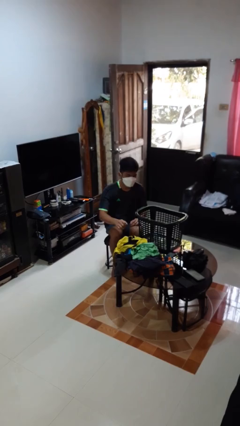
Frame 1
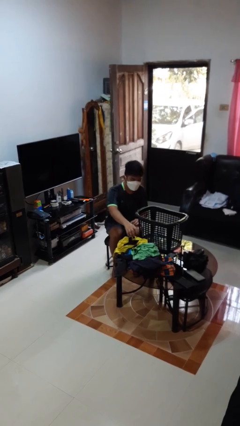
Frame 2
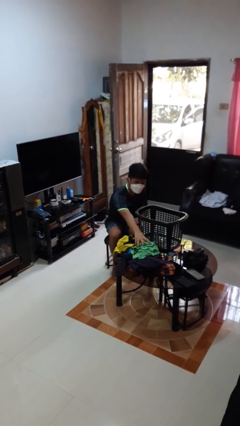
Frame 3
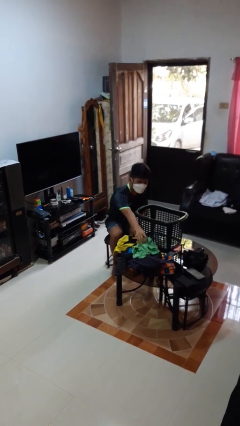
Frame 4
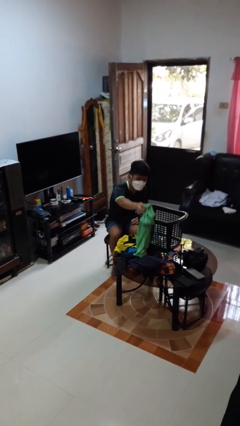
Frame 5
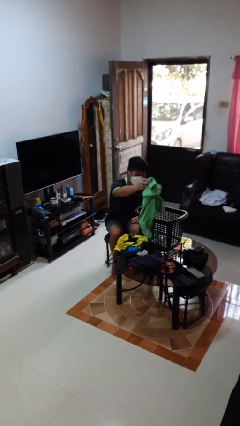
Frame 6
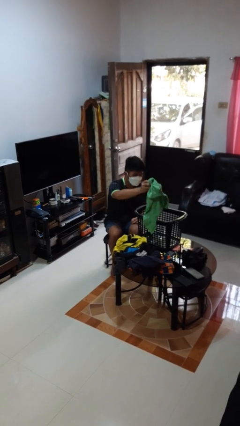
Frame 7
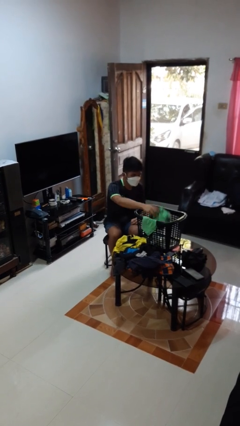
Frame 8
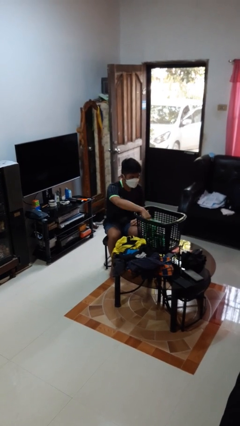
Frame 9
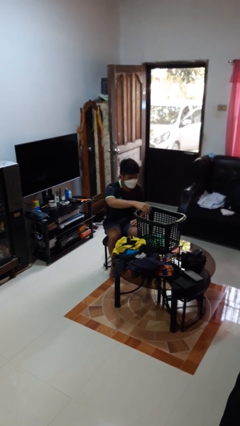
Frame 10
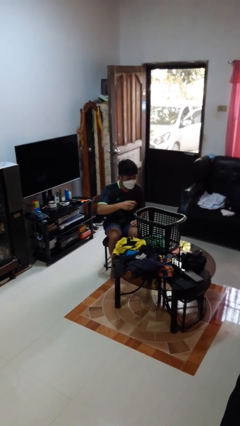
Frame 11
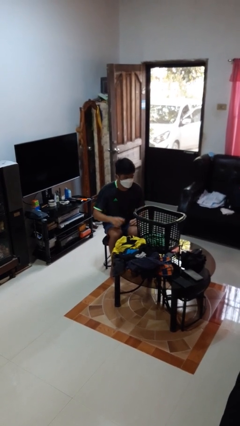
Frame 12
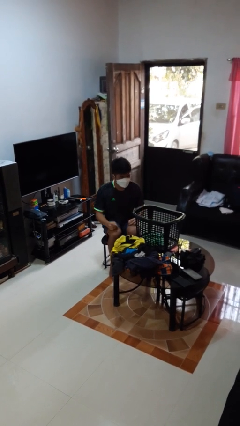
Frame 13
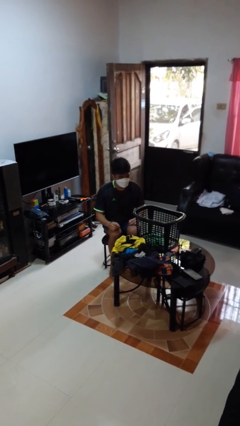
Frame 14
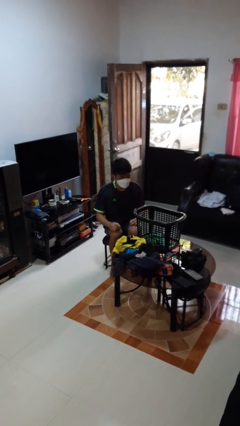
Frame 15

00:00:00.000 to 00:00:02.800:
person puts object into basket

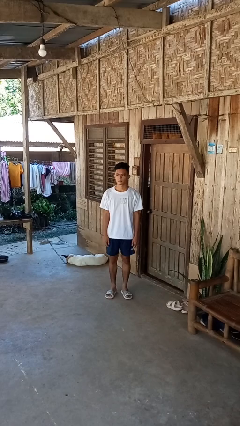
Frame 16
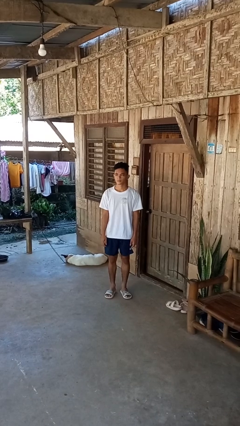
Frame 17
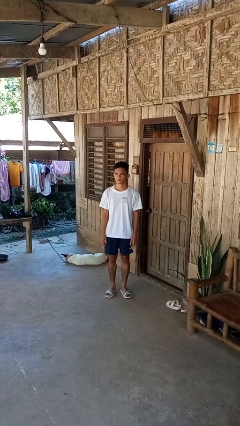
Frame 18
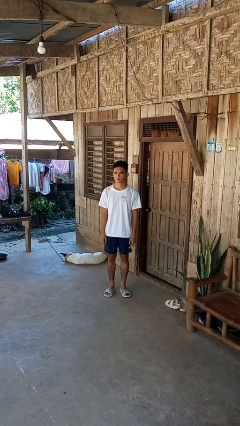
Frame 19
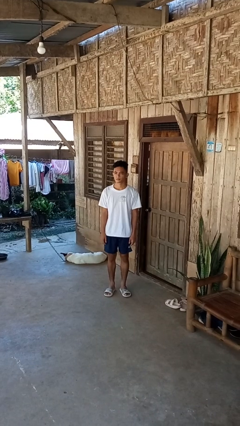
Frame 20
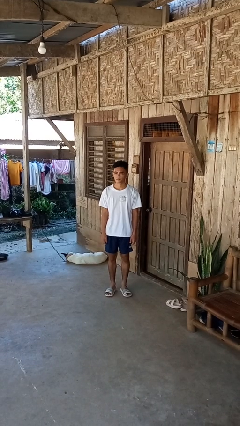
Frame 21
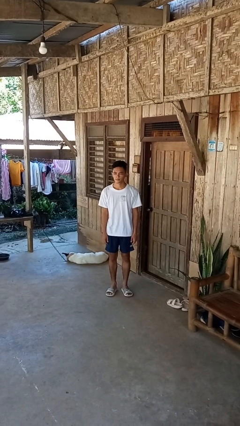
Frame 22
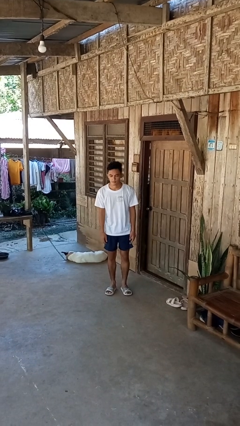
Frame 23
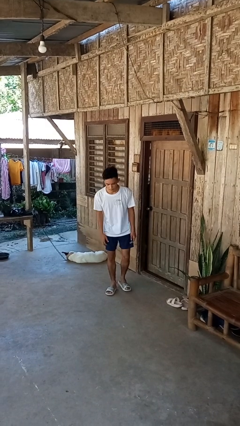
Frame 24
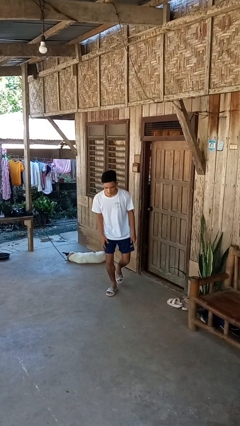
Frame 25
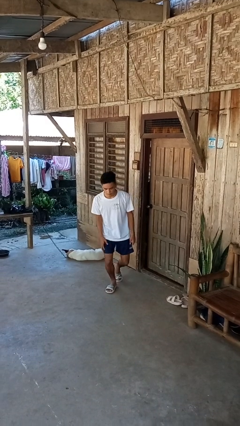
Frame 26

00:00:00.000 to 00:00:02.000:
person stands up from floor

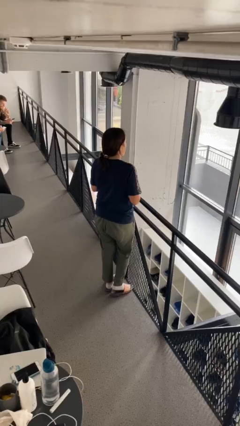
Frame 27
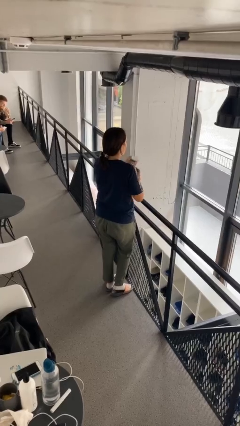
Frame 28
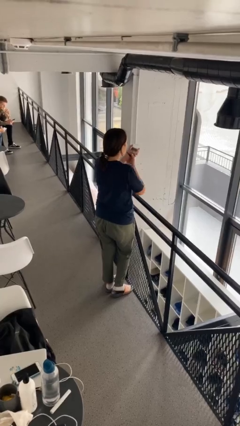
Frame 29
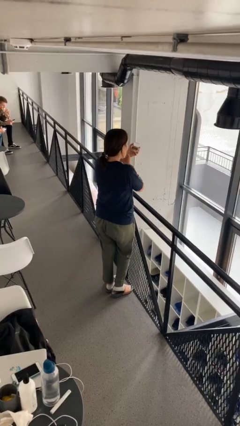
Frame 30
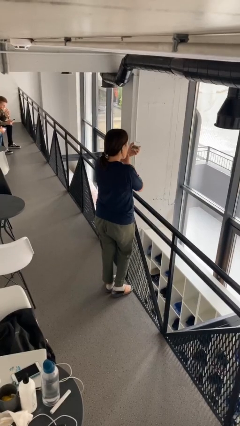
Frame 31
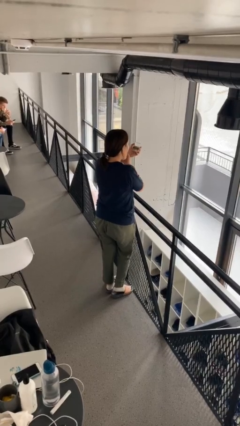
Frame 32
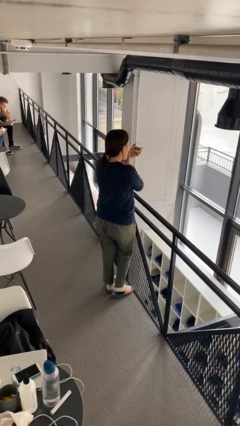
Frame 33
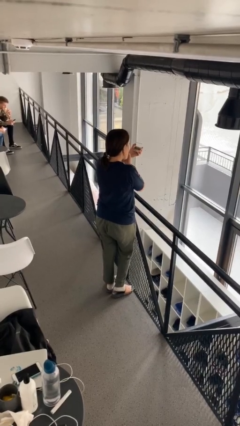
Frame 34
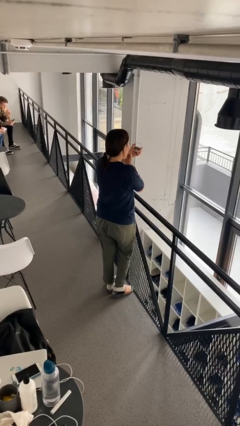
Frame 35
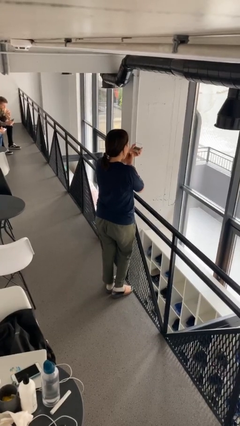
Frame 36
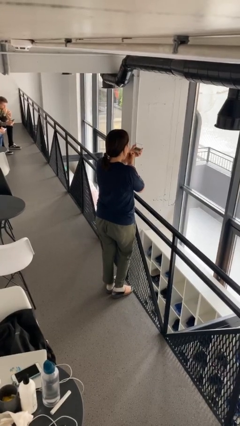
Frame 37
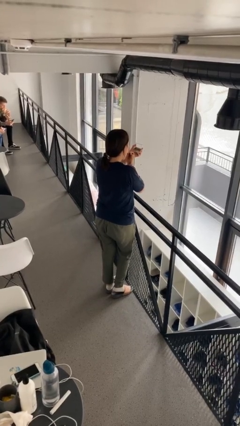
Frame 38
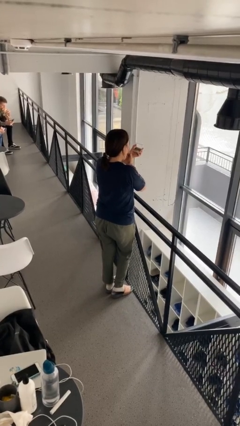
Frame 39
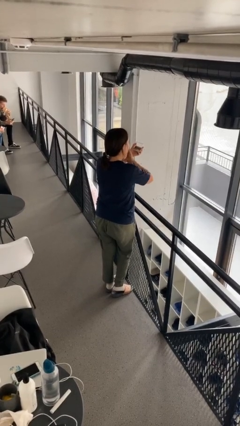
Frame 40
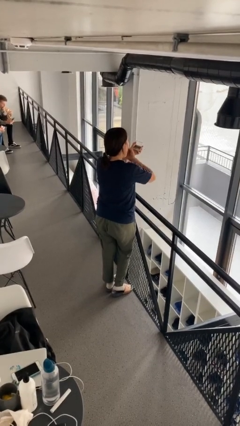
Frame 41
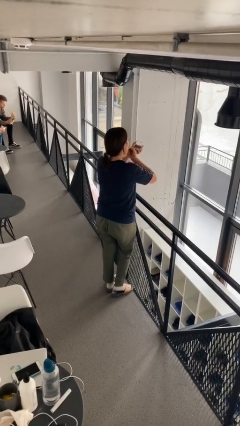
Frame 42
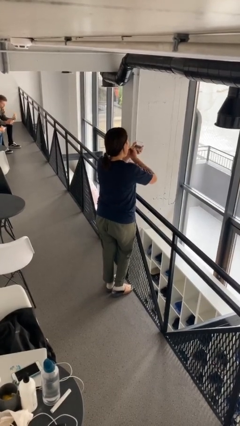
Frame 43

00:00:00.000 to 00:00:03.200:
person applies lip makeup

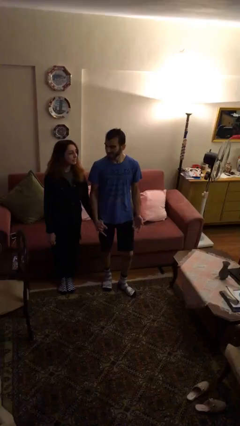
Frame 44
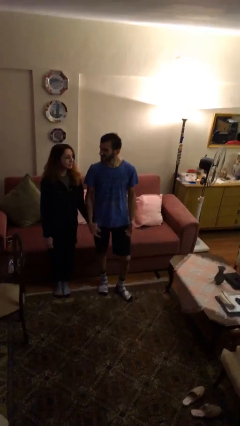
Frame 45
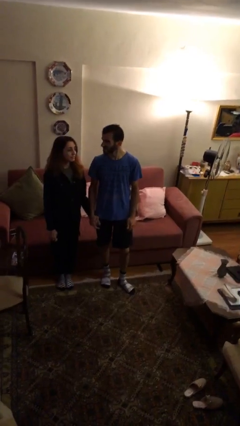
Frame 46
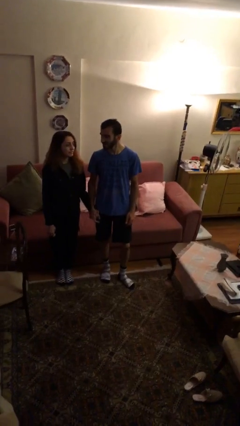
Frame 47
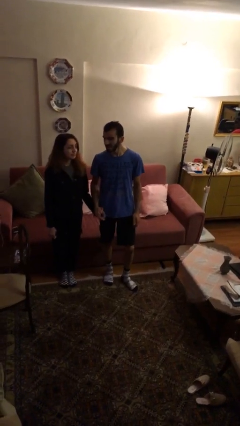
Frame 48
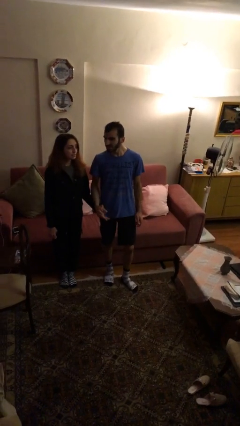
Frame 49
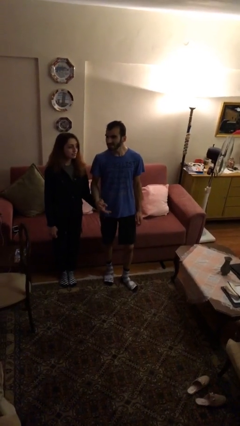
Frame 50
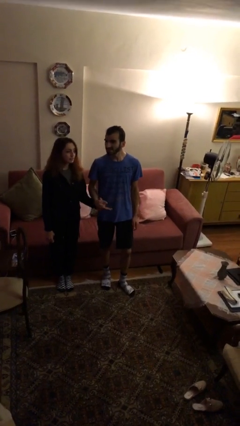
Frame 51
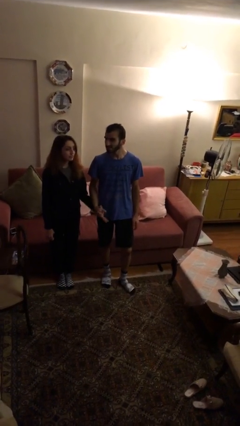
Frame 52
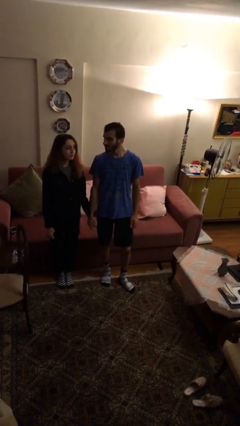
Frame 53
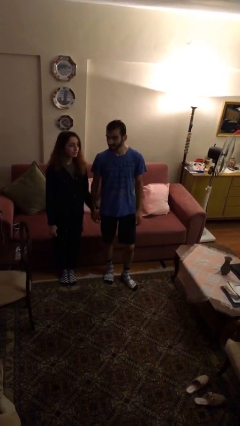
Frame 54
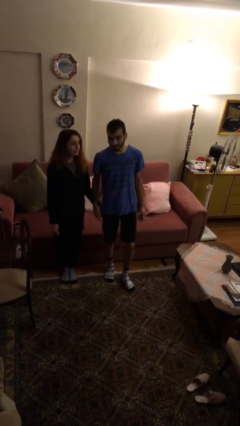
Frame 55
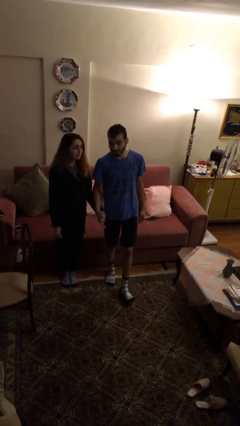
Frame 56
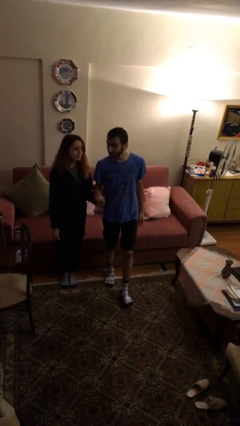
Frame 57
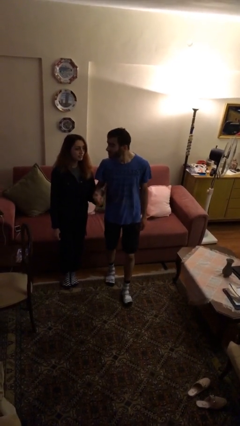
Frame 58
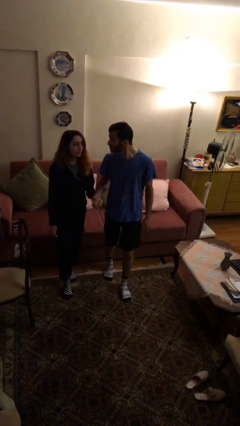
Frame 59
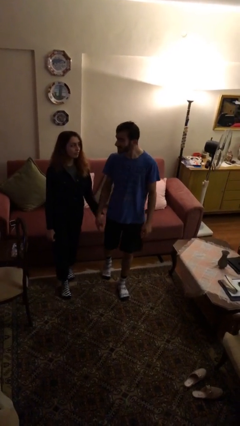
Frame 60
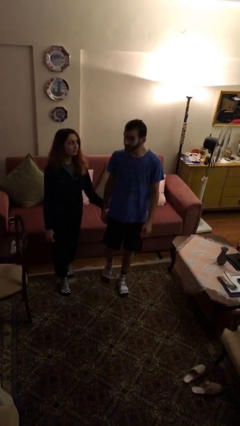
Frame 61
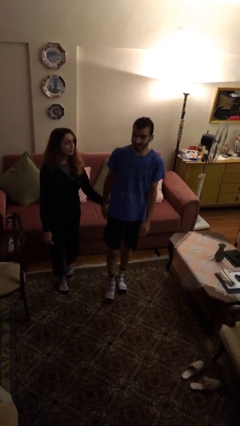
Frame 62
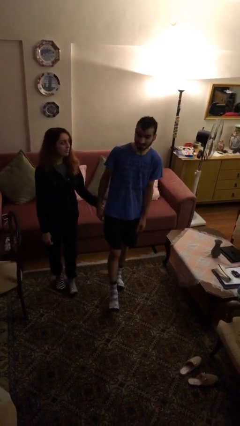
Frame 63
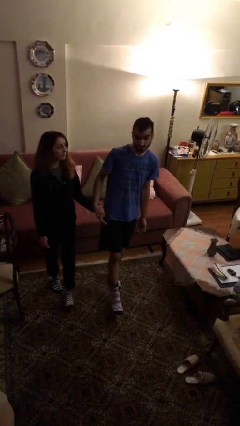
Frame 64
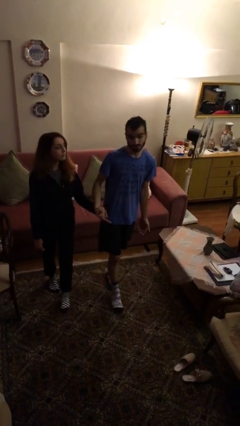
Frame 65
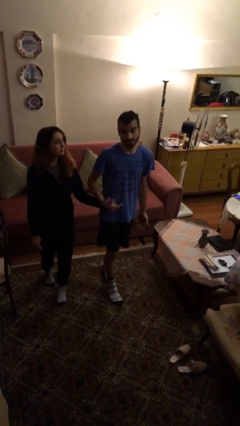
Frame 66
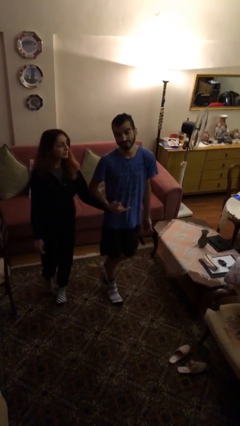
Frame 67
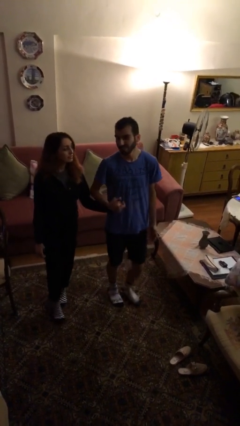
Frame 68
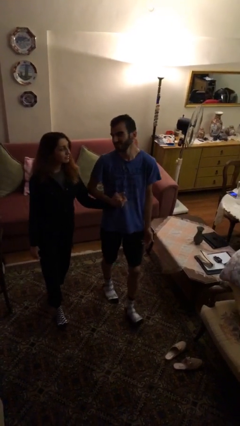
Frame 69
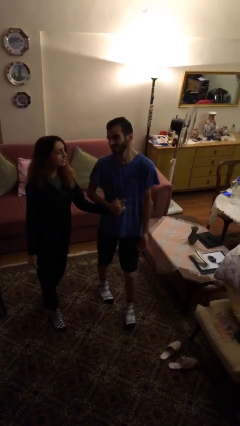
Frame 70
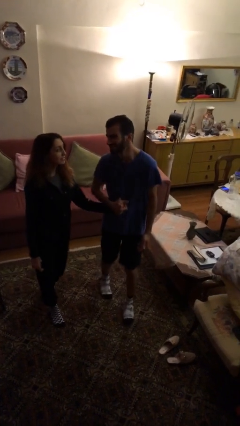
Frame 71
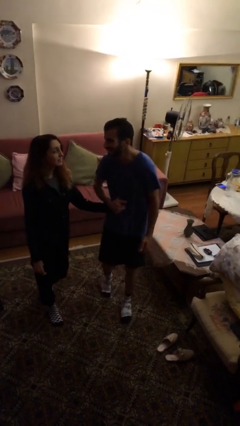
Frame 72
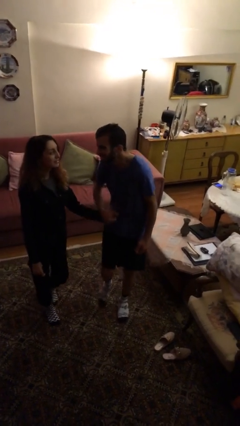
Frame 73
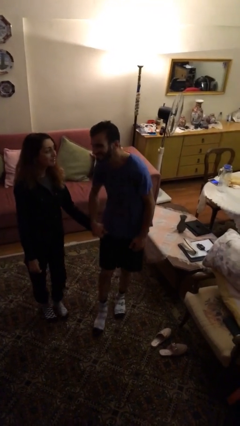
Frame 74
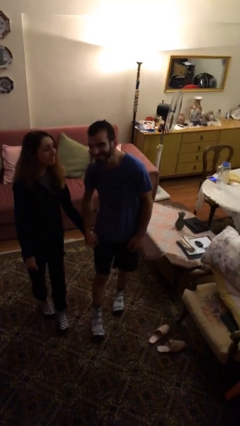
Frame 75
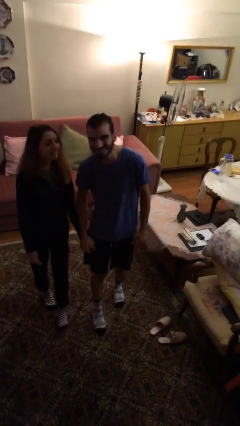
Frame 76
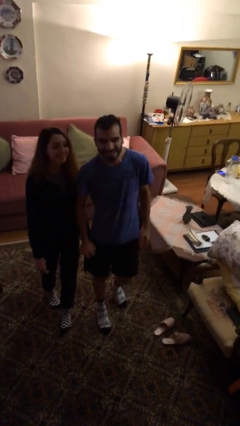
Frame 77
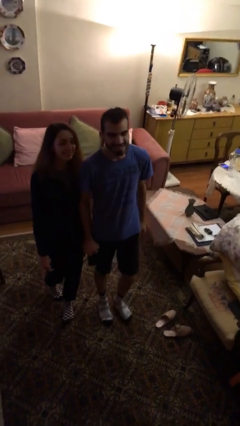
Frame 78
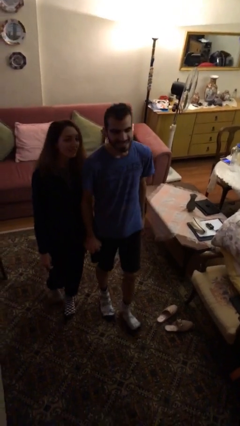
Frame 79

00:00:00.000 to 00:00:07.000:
person holds hand

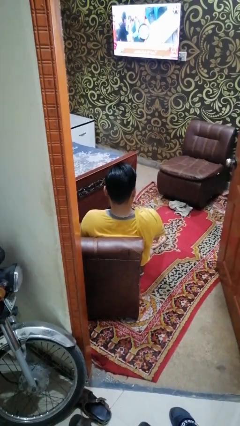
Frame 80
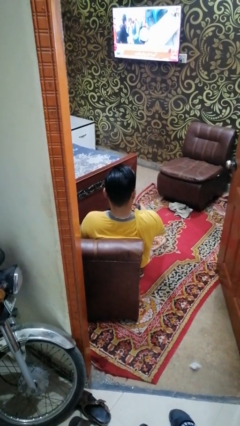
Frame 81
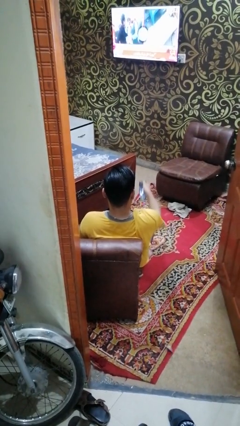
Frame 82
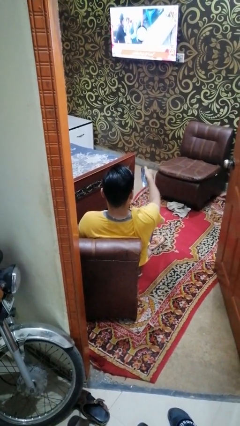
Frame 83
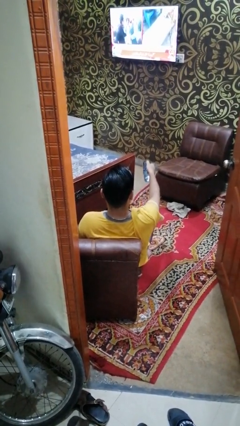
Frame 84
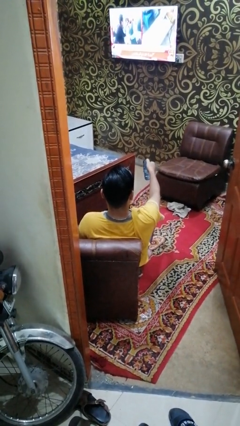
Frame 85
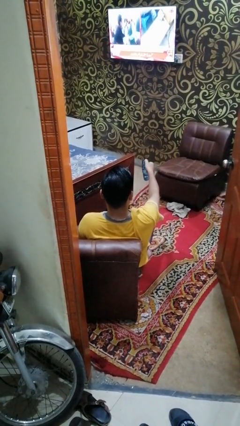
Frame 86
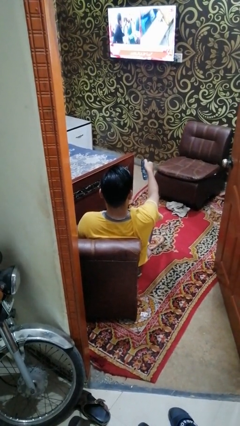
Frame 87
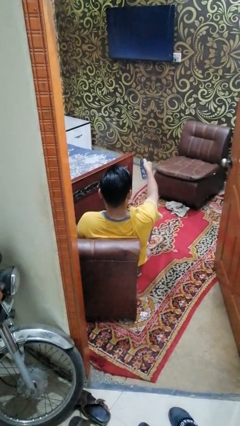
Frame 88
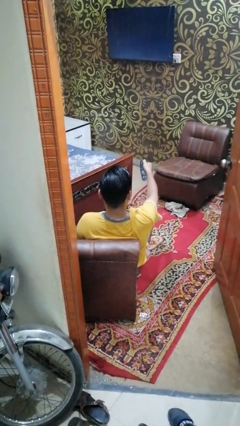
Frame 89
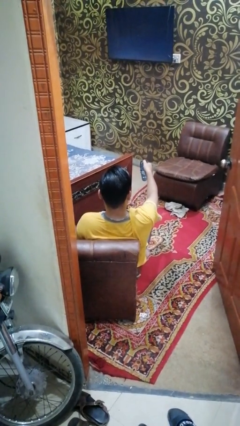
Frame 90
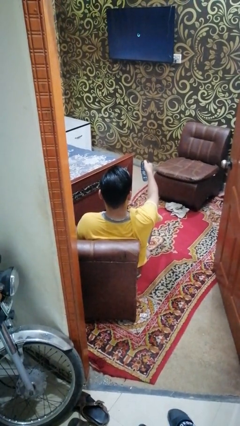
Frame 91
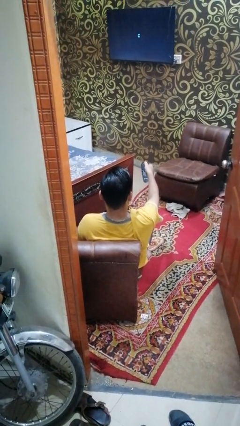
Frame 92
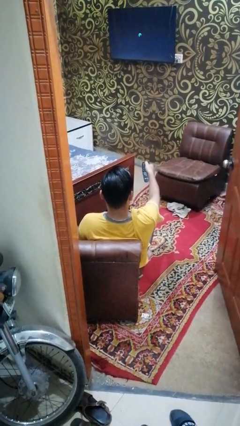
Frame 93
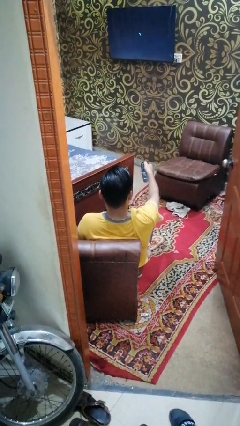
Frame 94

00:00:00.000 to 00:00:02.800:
person uses television remote
